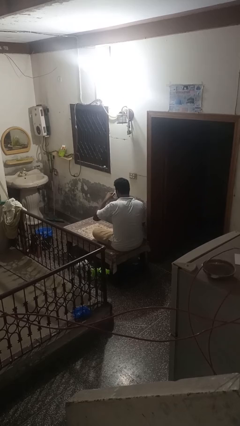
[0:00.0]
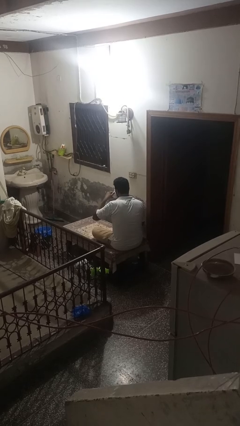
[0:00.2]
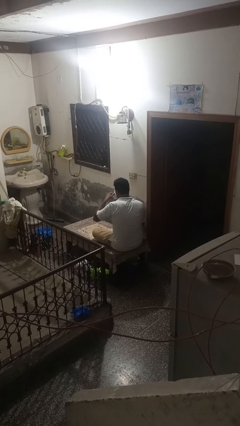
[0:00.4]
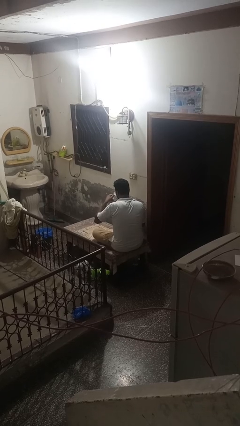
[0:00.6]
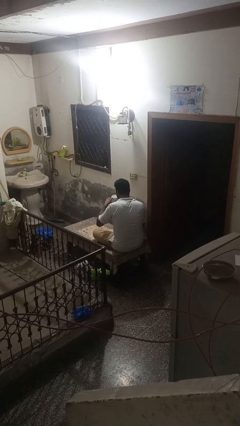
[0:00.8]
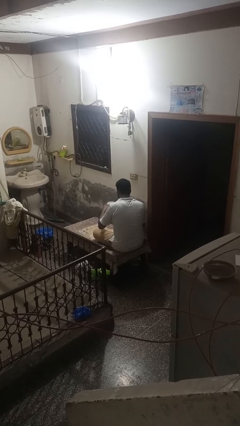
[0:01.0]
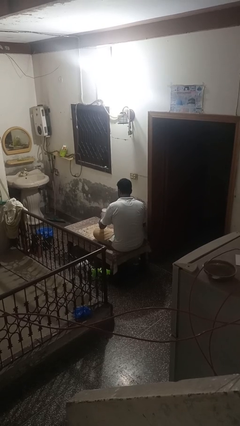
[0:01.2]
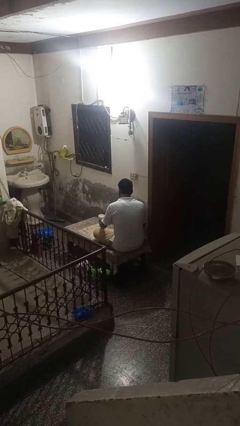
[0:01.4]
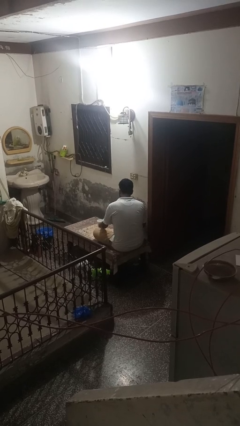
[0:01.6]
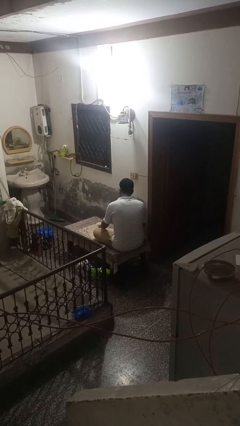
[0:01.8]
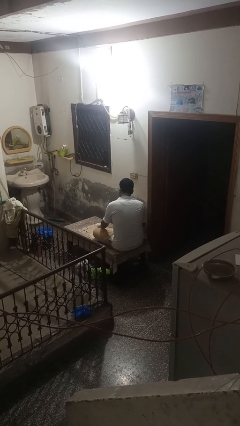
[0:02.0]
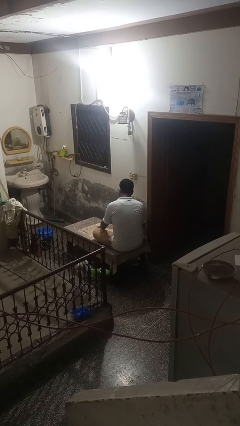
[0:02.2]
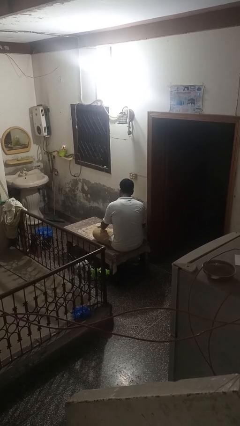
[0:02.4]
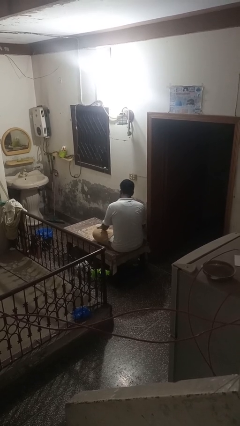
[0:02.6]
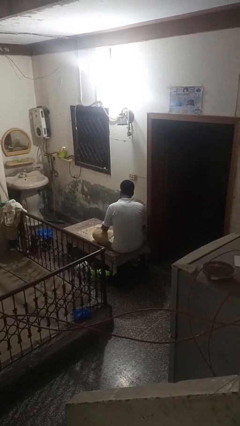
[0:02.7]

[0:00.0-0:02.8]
person puts down object on table

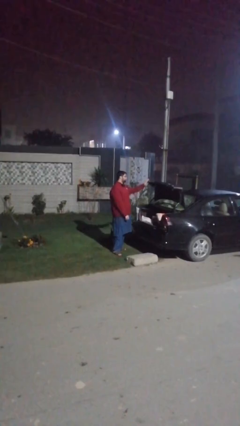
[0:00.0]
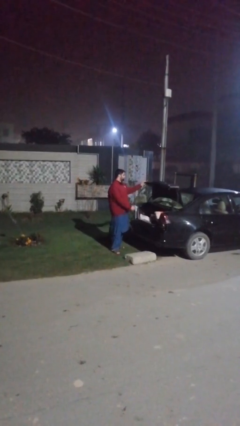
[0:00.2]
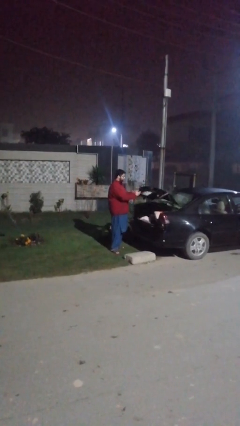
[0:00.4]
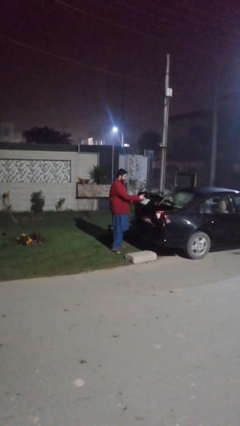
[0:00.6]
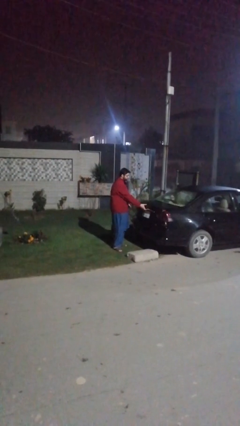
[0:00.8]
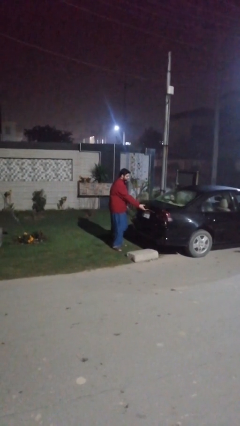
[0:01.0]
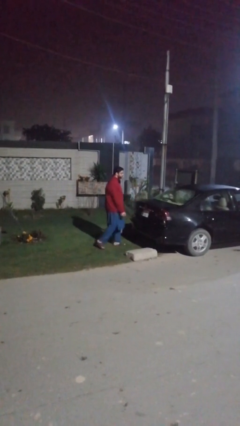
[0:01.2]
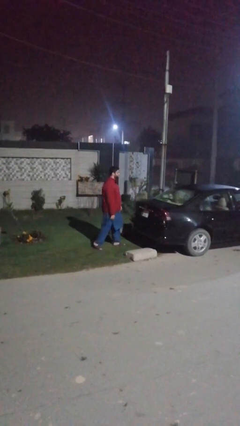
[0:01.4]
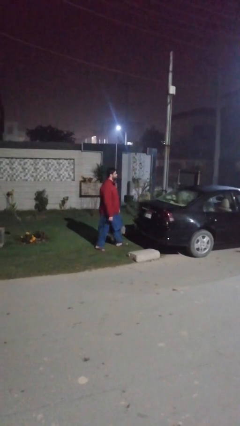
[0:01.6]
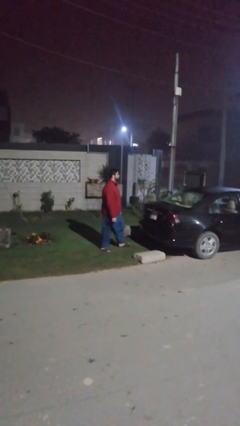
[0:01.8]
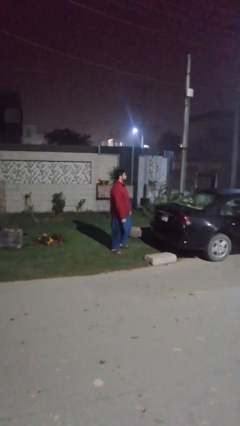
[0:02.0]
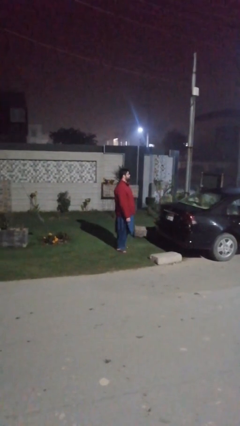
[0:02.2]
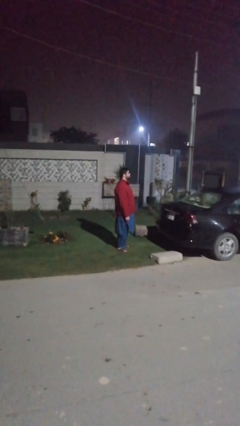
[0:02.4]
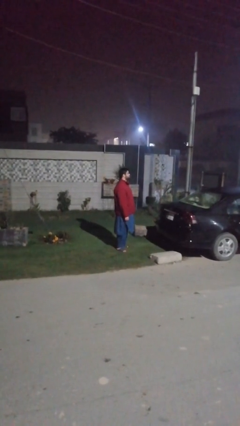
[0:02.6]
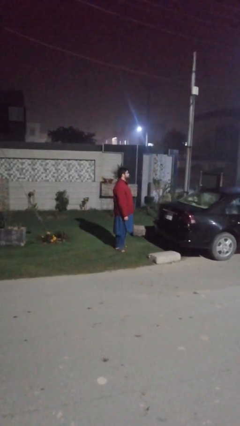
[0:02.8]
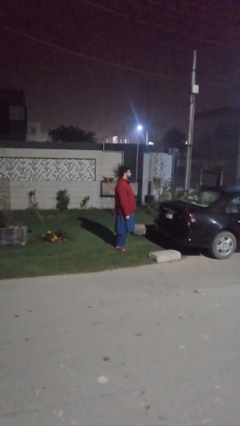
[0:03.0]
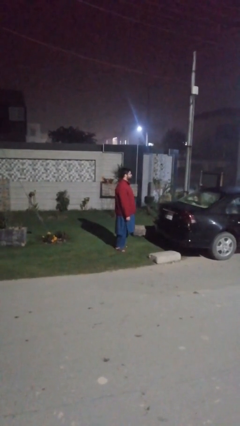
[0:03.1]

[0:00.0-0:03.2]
person closes car trunk

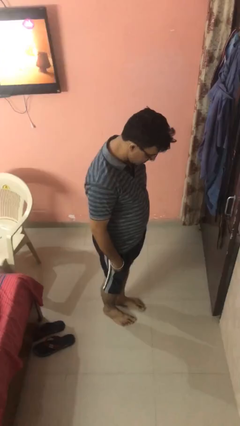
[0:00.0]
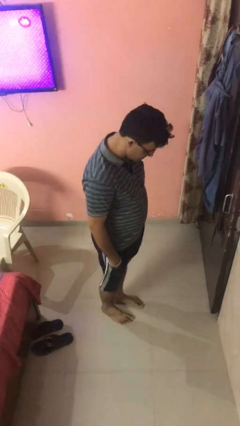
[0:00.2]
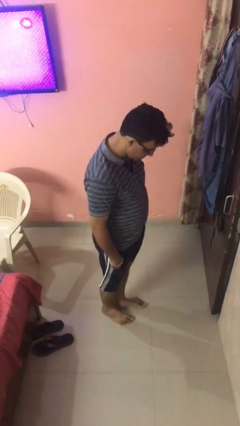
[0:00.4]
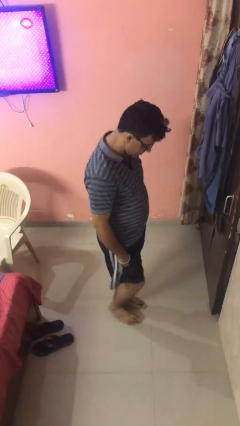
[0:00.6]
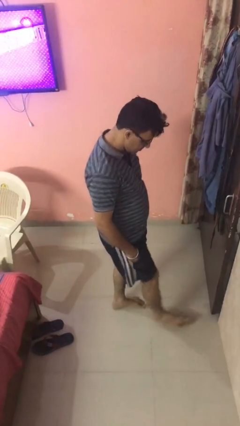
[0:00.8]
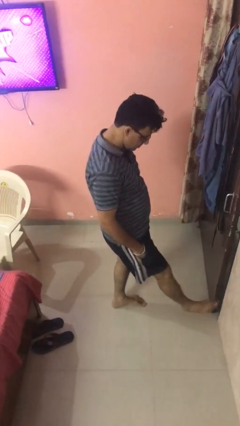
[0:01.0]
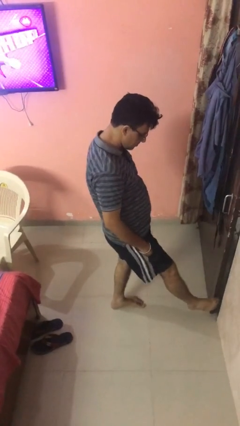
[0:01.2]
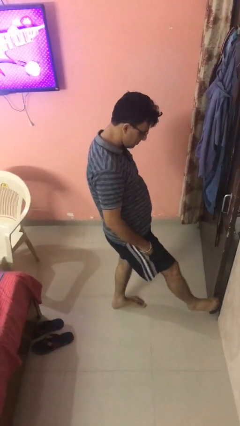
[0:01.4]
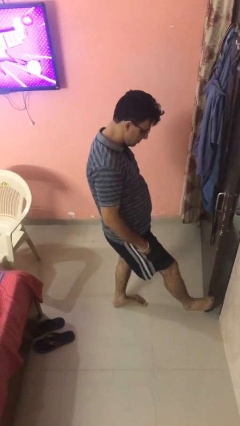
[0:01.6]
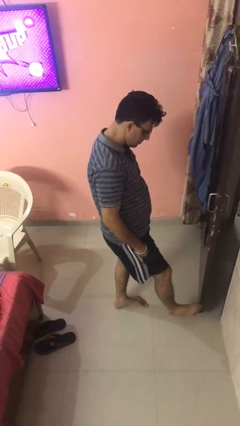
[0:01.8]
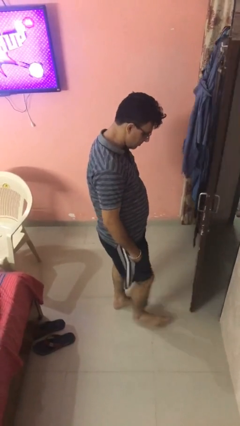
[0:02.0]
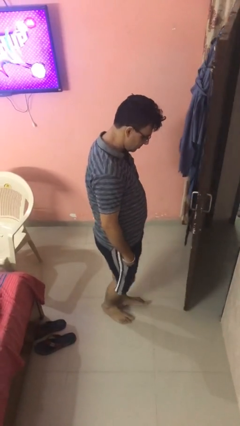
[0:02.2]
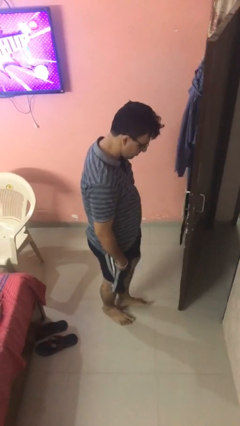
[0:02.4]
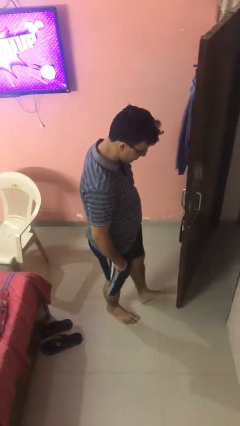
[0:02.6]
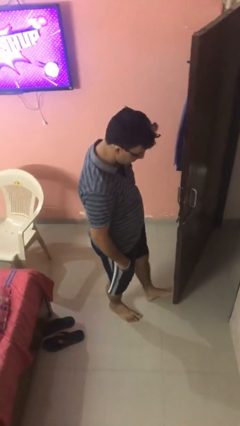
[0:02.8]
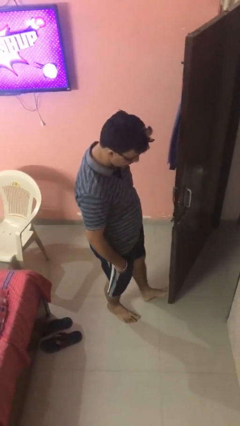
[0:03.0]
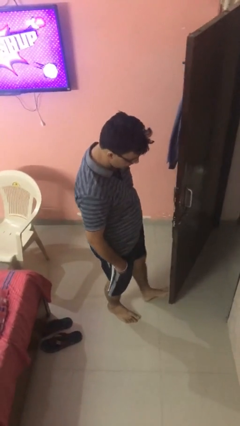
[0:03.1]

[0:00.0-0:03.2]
person opens facility door

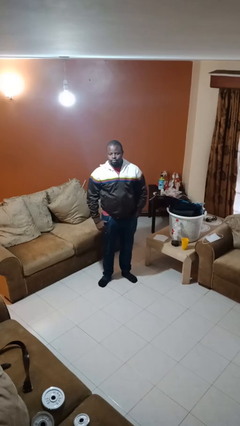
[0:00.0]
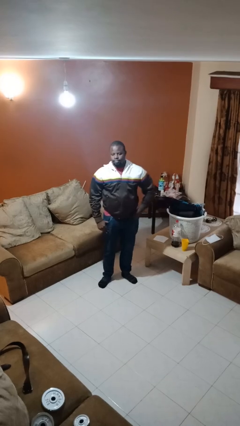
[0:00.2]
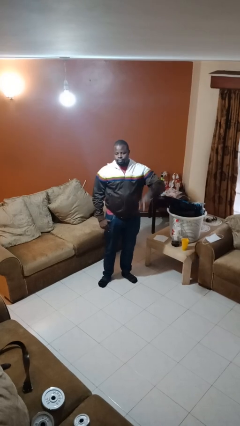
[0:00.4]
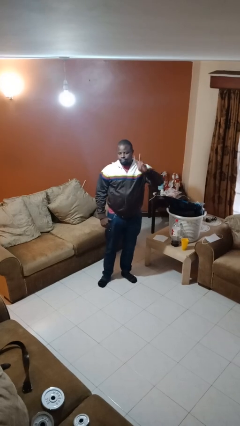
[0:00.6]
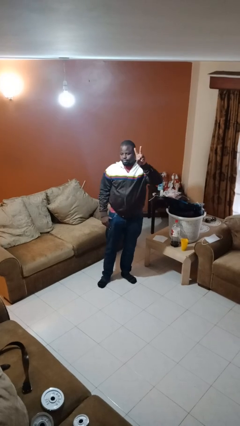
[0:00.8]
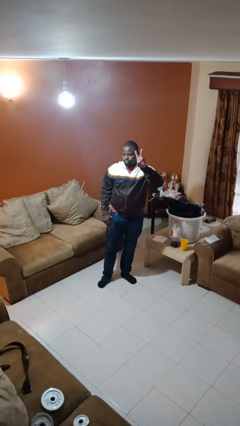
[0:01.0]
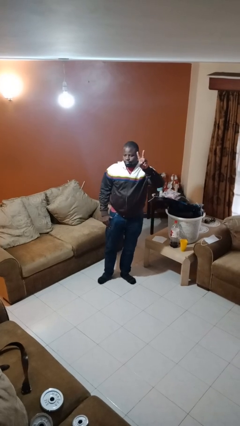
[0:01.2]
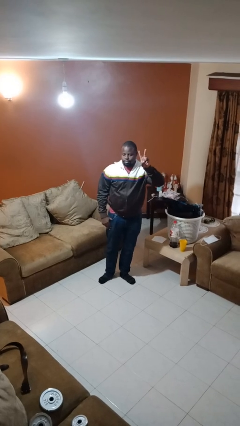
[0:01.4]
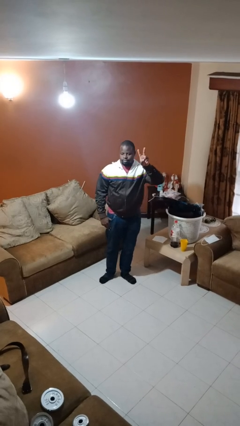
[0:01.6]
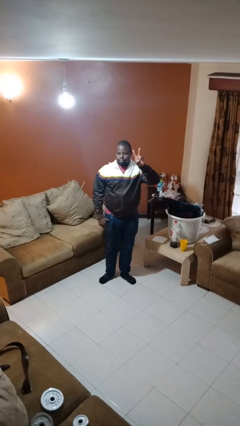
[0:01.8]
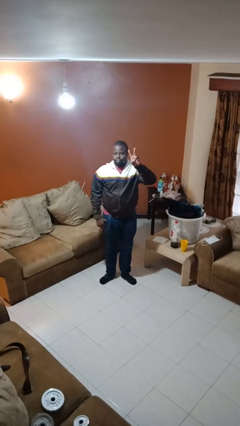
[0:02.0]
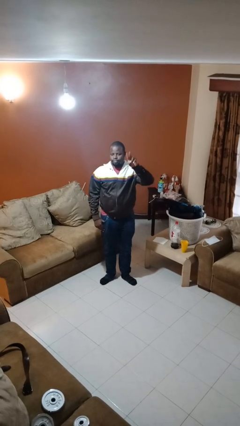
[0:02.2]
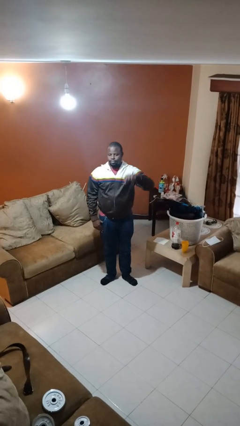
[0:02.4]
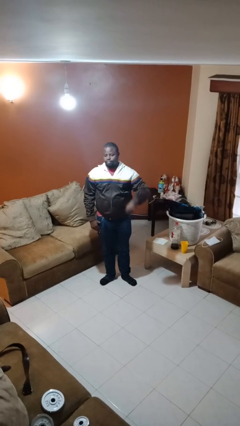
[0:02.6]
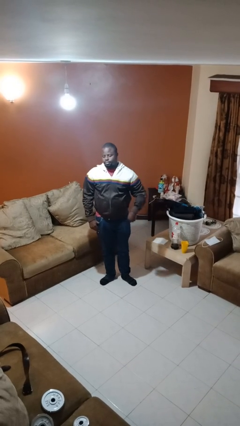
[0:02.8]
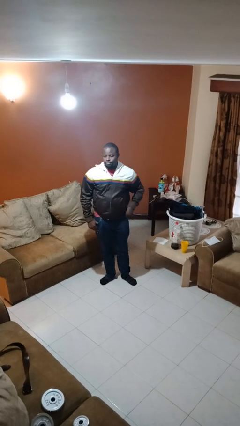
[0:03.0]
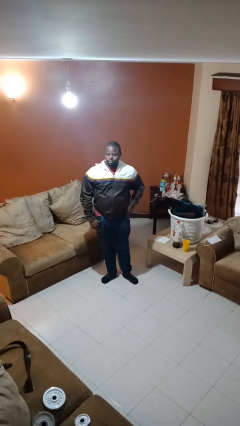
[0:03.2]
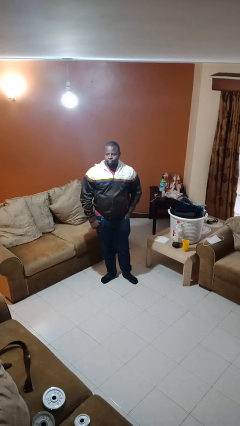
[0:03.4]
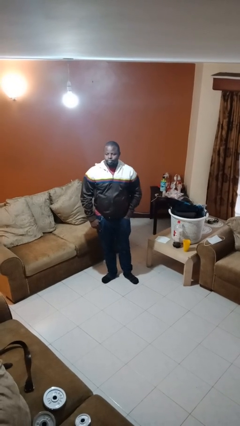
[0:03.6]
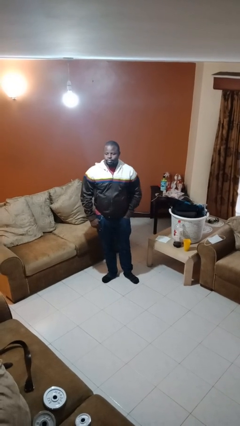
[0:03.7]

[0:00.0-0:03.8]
person gestures peace

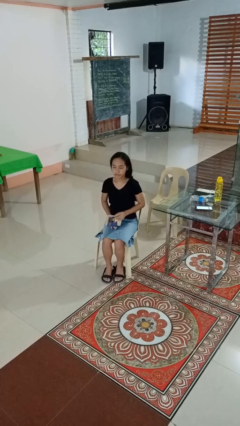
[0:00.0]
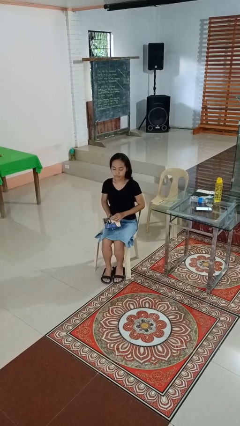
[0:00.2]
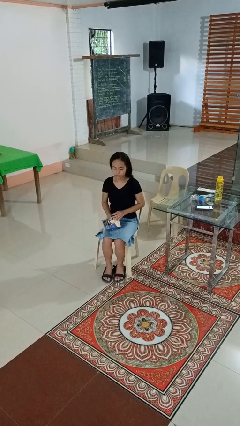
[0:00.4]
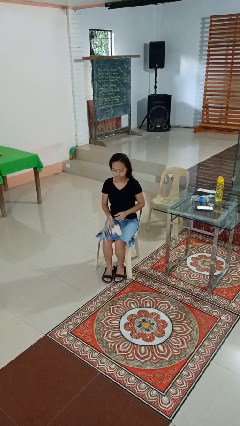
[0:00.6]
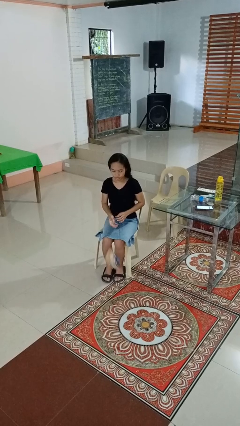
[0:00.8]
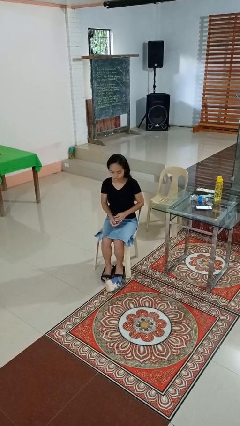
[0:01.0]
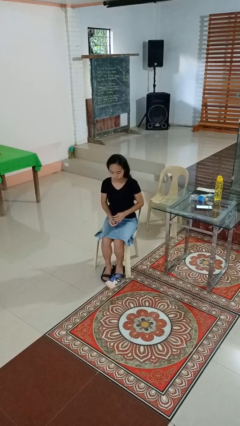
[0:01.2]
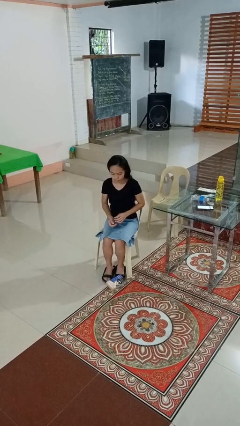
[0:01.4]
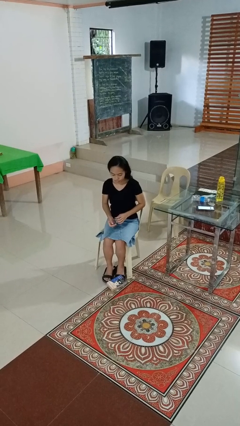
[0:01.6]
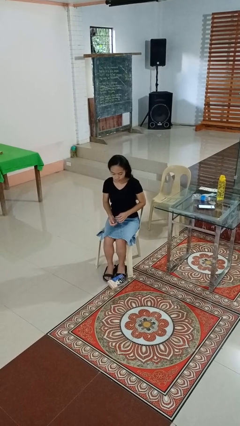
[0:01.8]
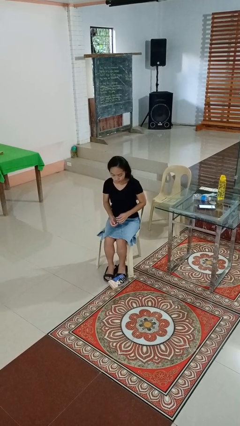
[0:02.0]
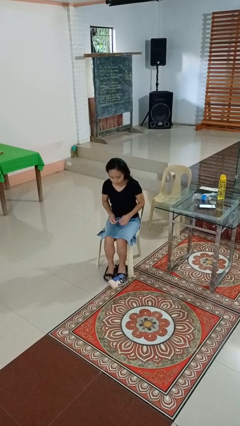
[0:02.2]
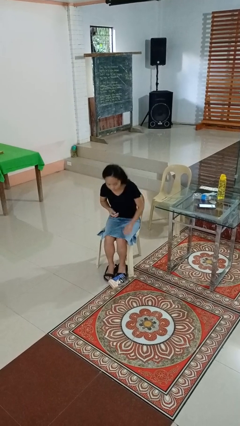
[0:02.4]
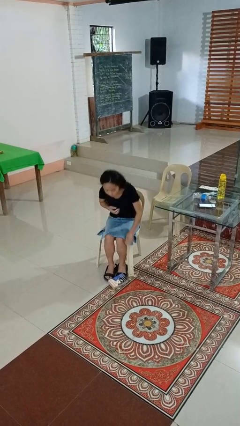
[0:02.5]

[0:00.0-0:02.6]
person drops object

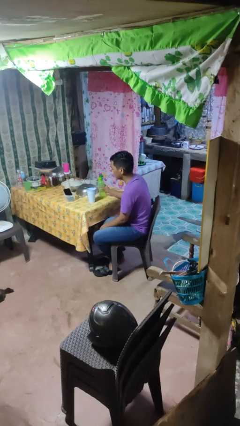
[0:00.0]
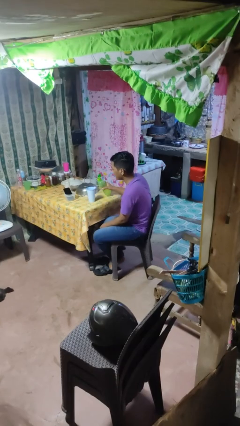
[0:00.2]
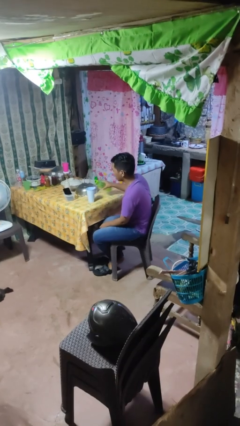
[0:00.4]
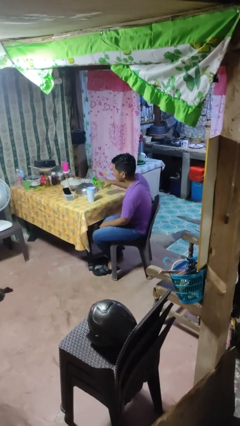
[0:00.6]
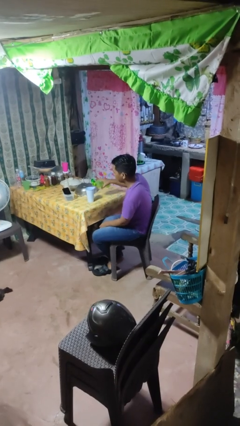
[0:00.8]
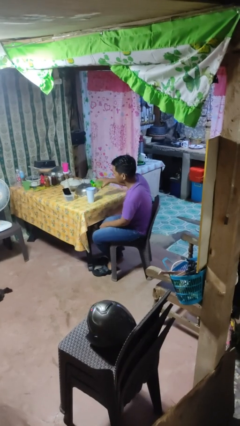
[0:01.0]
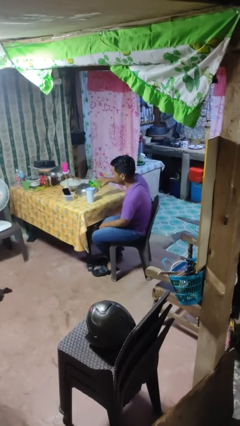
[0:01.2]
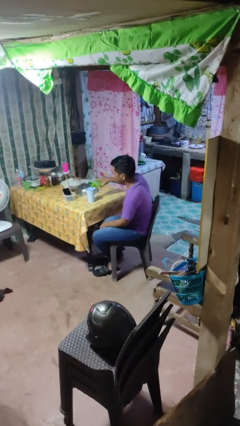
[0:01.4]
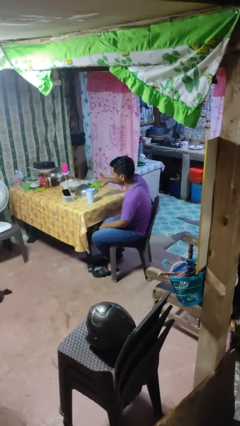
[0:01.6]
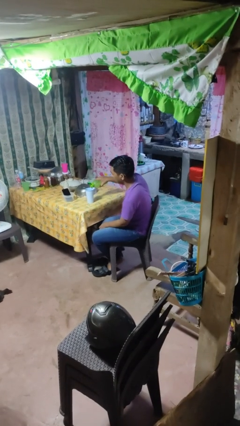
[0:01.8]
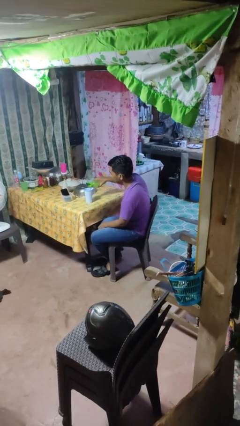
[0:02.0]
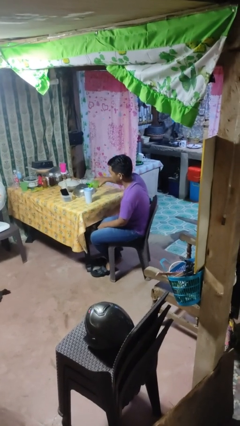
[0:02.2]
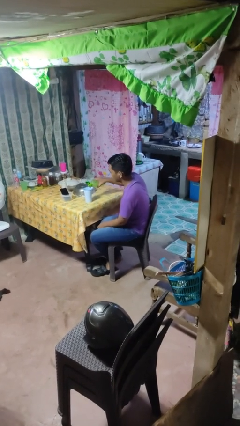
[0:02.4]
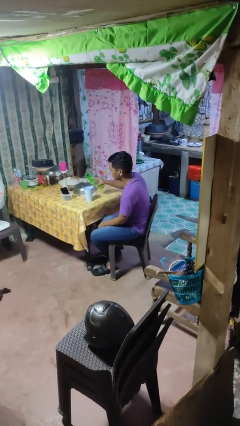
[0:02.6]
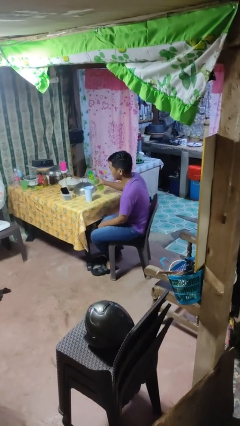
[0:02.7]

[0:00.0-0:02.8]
person pours liquid into cup
